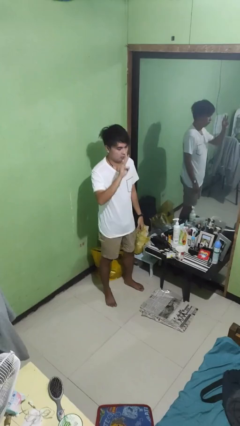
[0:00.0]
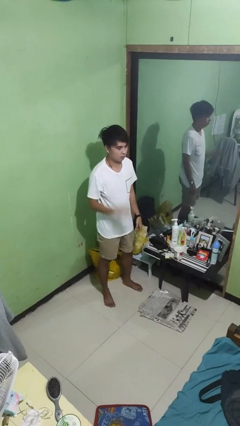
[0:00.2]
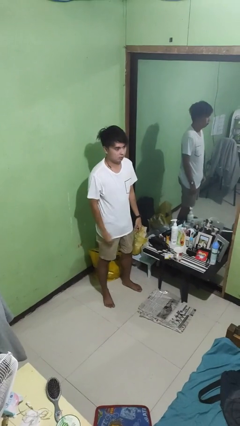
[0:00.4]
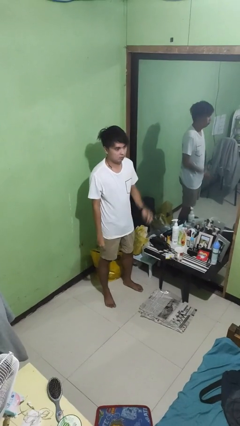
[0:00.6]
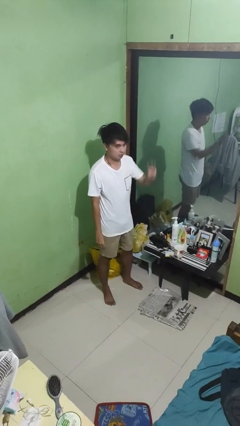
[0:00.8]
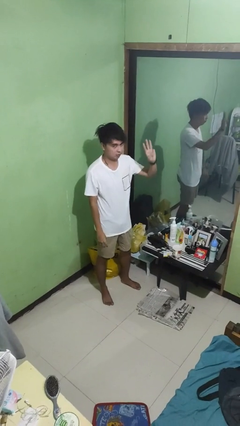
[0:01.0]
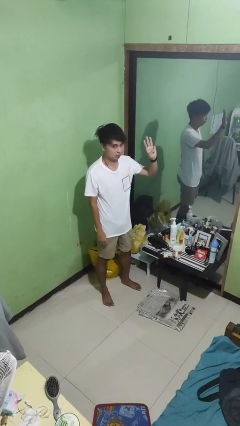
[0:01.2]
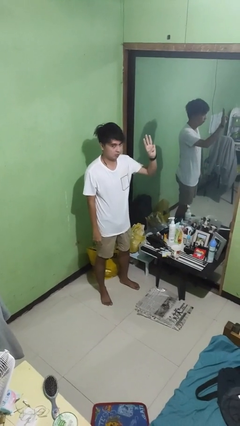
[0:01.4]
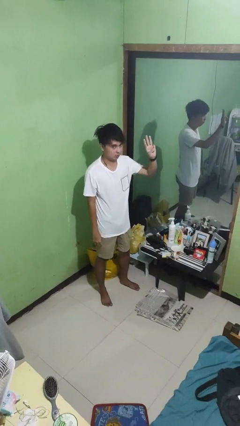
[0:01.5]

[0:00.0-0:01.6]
person gestures number three

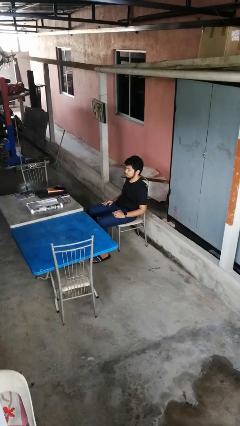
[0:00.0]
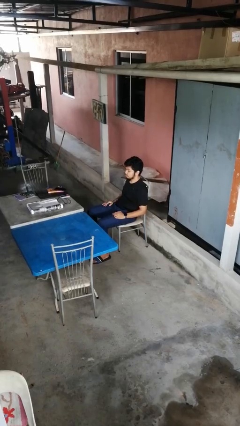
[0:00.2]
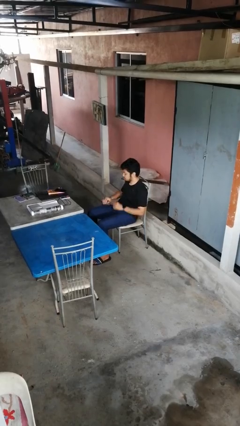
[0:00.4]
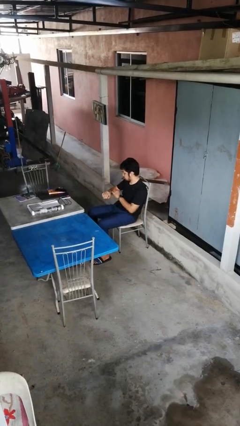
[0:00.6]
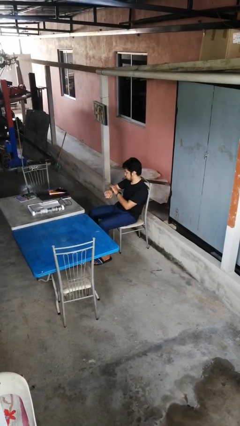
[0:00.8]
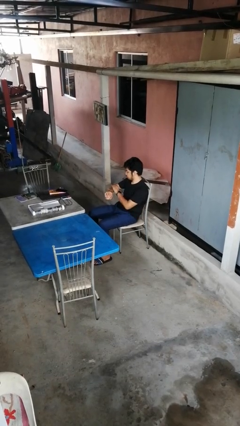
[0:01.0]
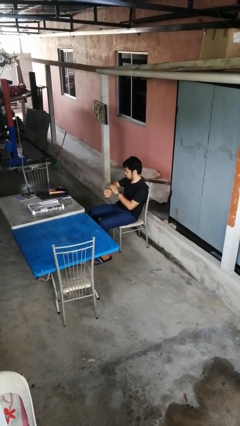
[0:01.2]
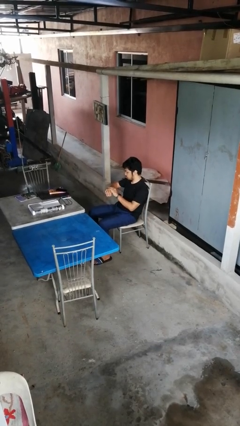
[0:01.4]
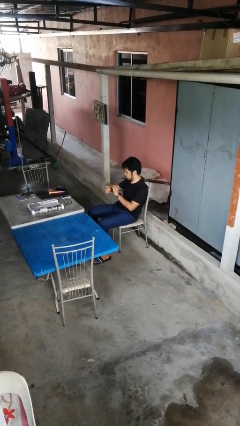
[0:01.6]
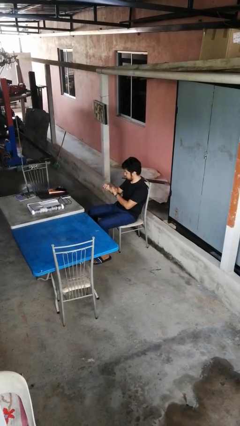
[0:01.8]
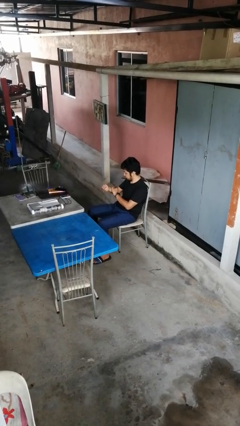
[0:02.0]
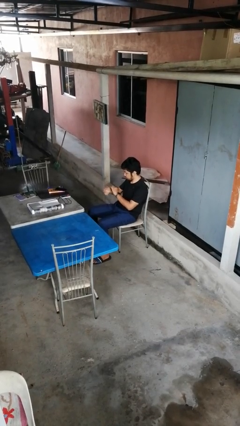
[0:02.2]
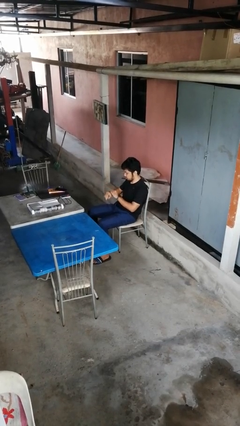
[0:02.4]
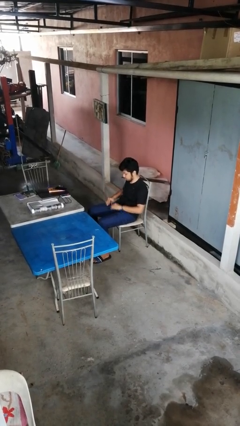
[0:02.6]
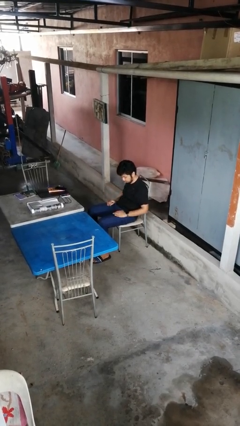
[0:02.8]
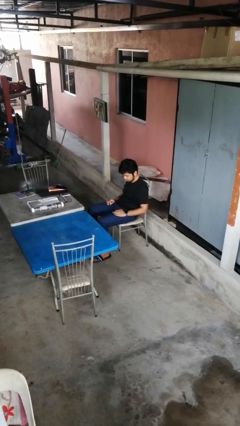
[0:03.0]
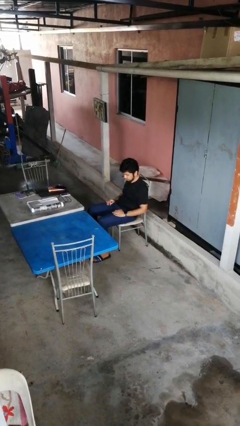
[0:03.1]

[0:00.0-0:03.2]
person looks at hands in lap

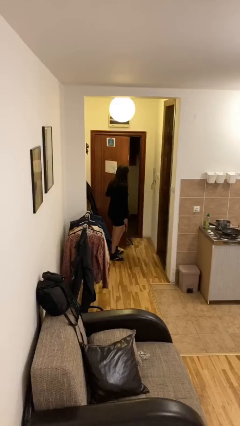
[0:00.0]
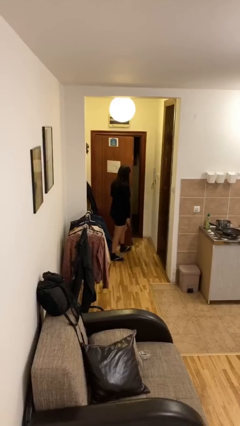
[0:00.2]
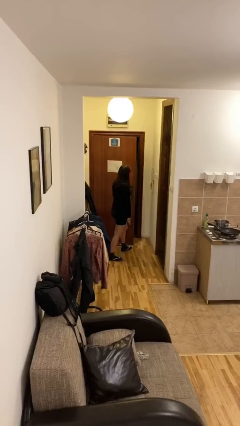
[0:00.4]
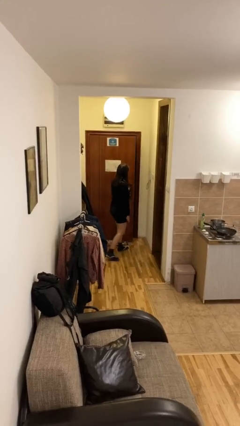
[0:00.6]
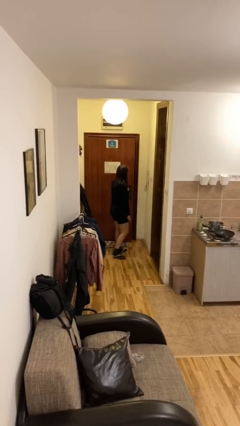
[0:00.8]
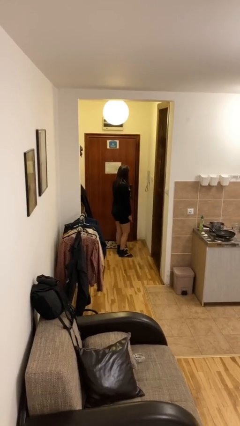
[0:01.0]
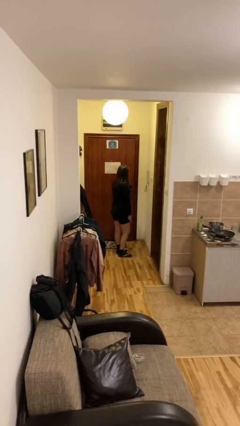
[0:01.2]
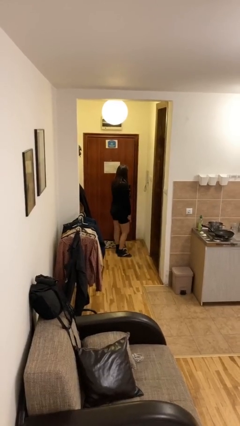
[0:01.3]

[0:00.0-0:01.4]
person closes facility door

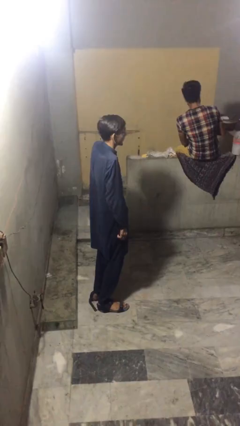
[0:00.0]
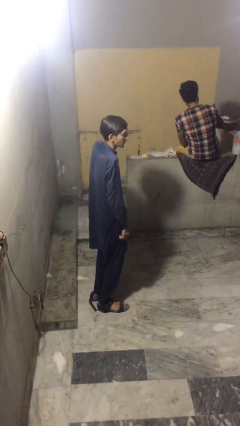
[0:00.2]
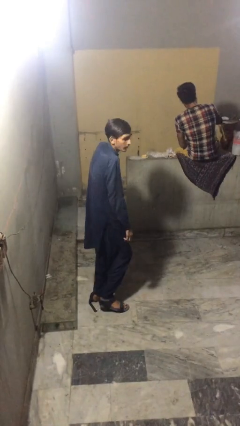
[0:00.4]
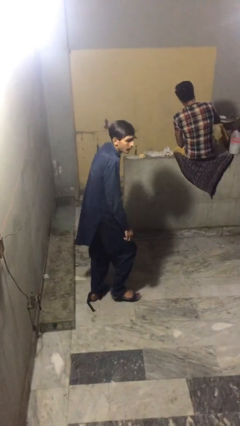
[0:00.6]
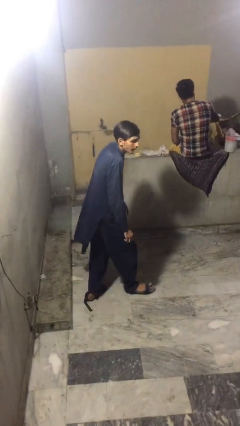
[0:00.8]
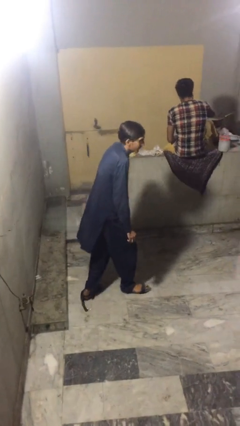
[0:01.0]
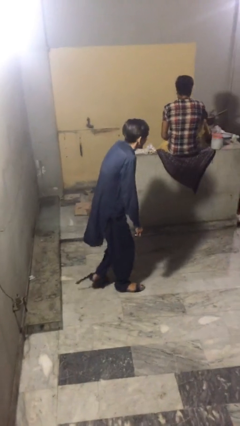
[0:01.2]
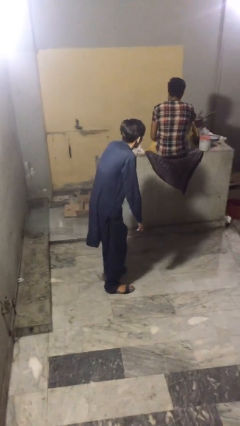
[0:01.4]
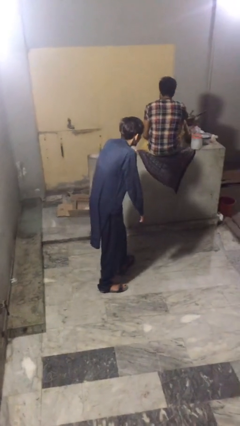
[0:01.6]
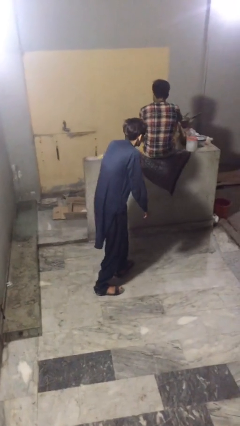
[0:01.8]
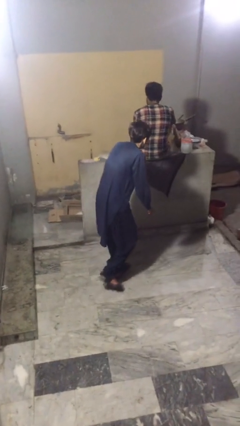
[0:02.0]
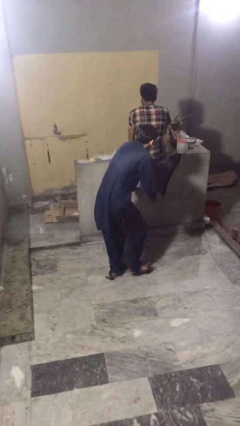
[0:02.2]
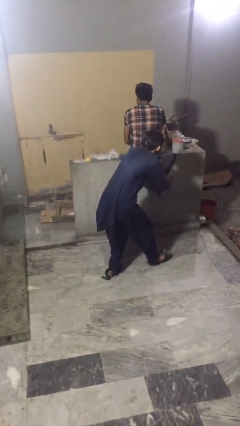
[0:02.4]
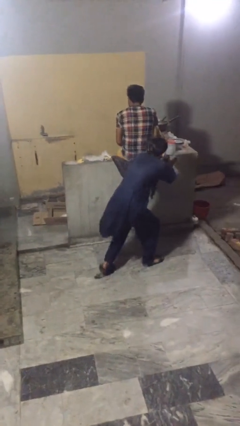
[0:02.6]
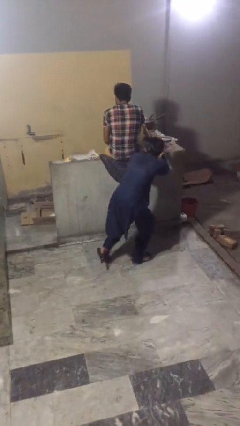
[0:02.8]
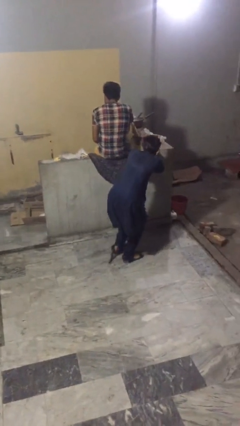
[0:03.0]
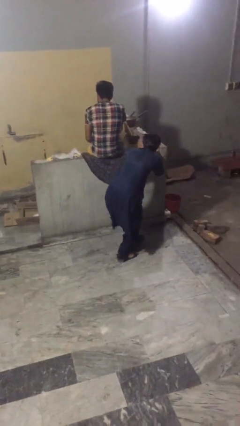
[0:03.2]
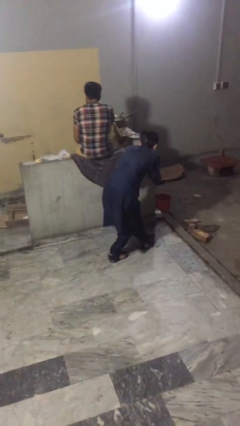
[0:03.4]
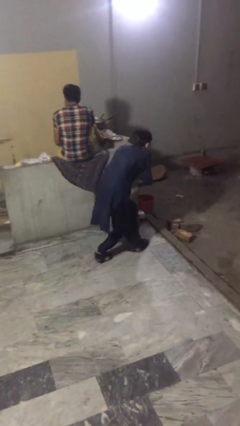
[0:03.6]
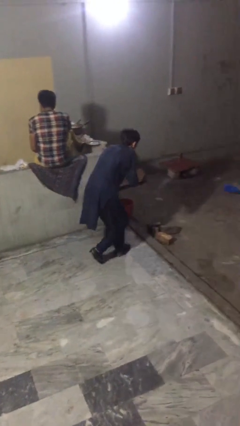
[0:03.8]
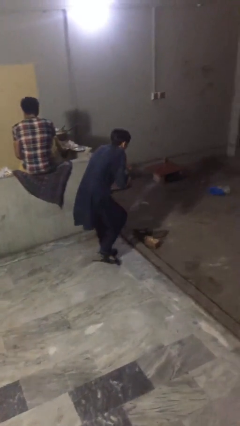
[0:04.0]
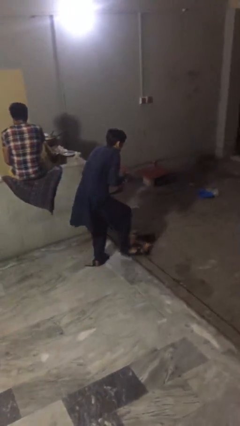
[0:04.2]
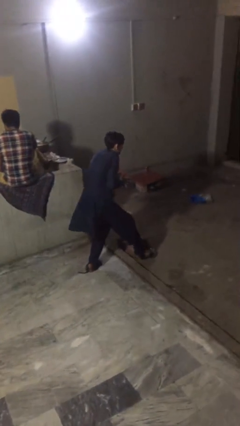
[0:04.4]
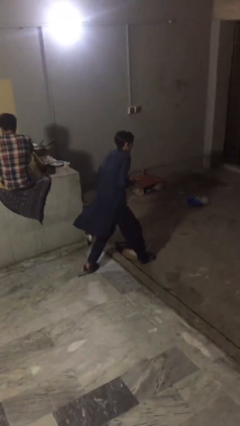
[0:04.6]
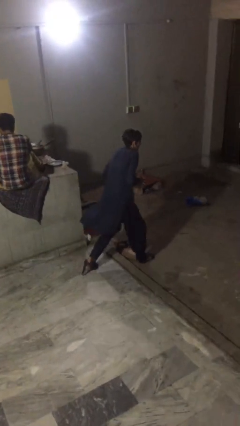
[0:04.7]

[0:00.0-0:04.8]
person steals object from person

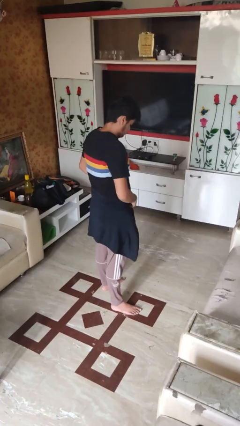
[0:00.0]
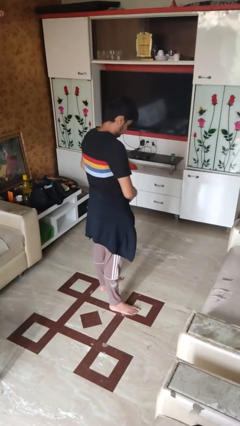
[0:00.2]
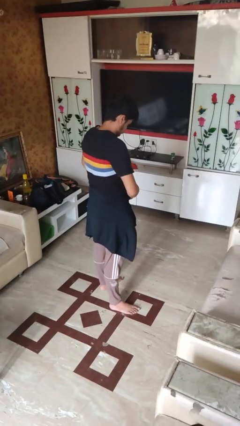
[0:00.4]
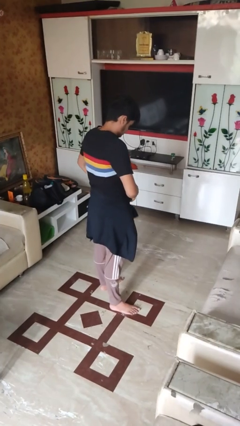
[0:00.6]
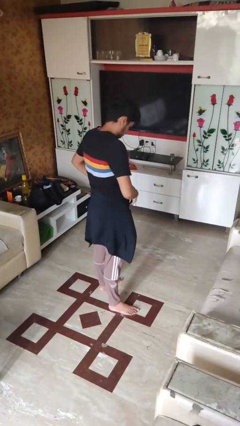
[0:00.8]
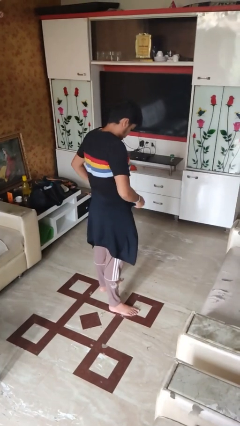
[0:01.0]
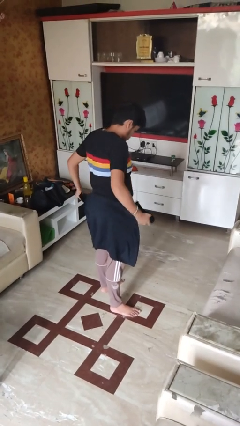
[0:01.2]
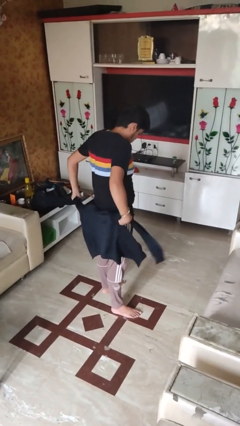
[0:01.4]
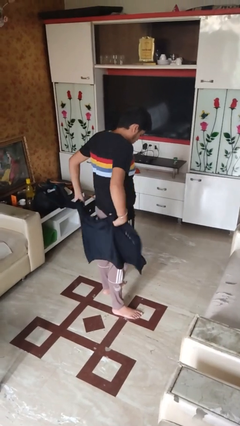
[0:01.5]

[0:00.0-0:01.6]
person unties jacket around waist

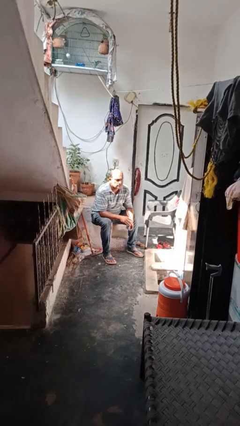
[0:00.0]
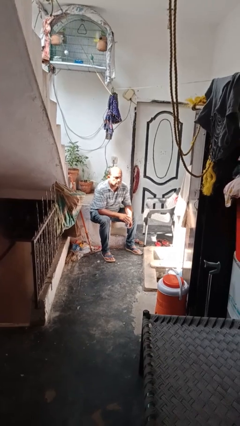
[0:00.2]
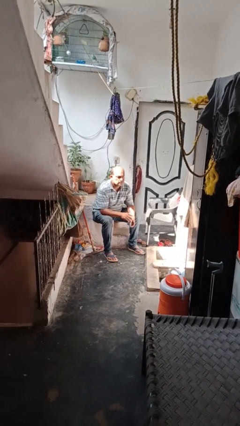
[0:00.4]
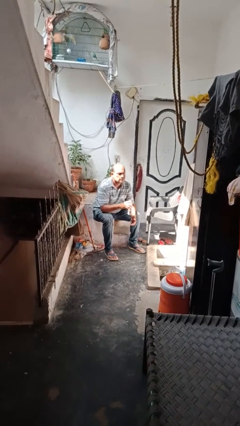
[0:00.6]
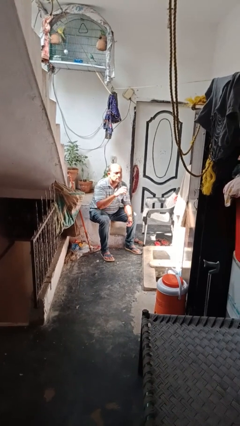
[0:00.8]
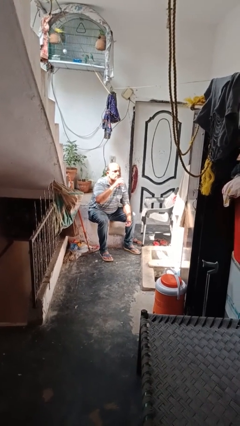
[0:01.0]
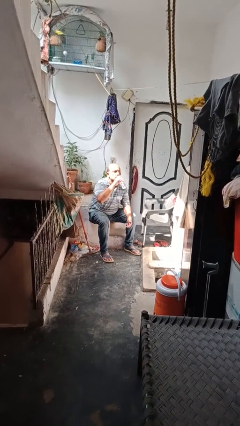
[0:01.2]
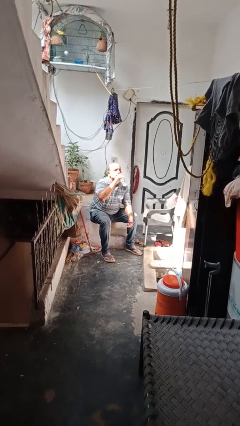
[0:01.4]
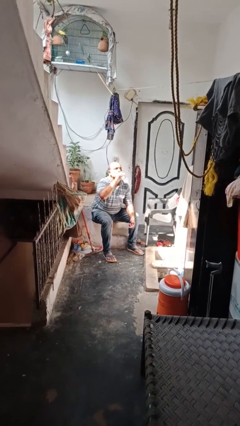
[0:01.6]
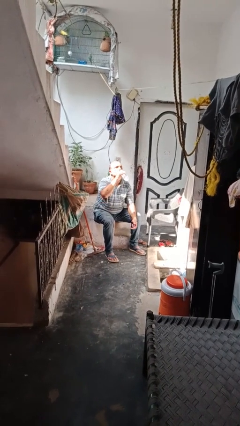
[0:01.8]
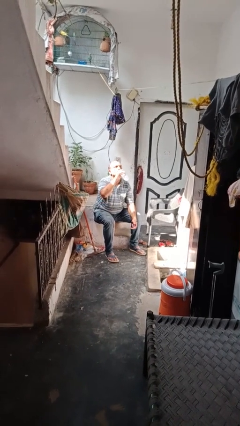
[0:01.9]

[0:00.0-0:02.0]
person drinks from bottle

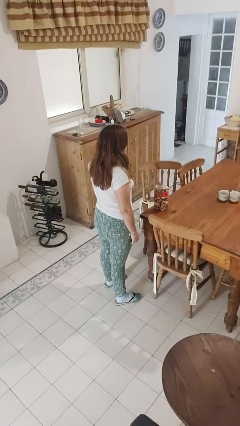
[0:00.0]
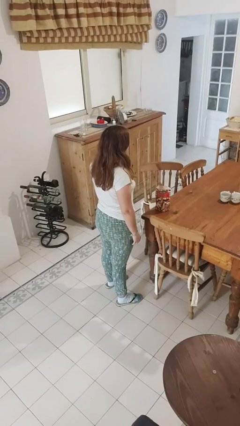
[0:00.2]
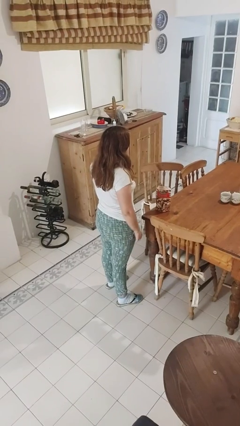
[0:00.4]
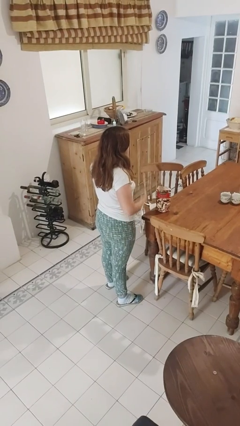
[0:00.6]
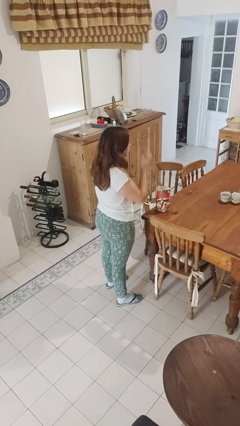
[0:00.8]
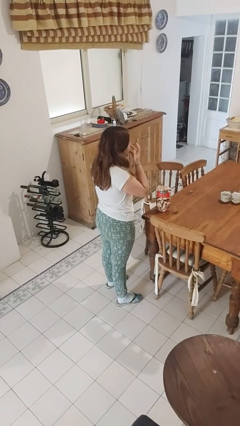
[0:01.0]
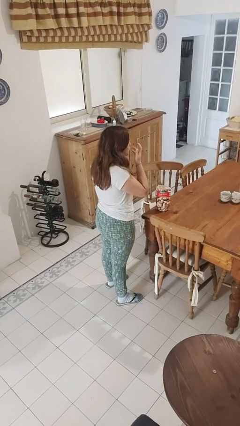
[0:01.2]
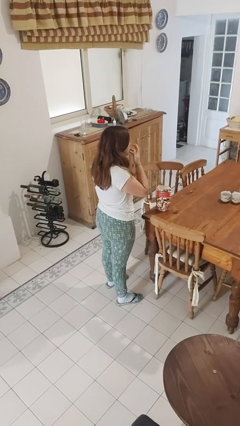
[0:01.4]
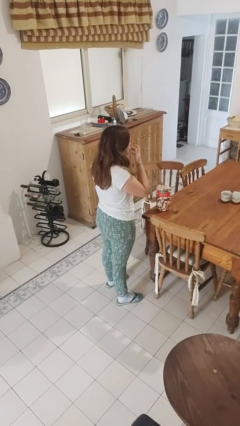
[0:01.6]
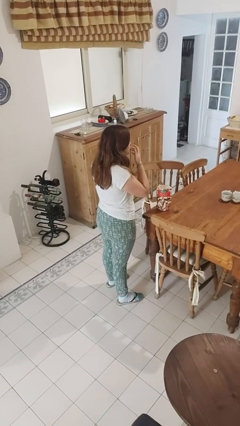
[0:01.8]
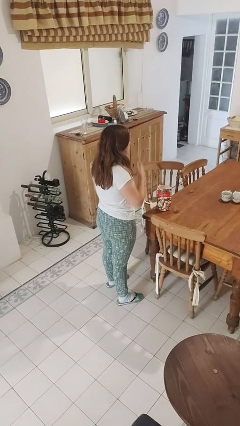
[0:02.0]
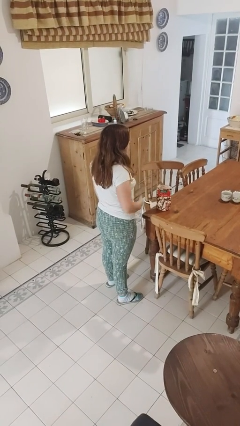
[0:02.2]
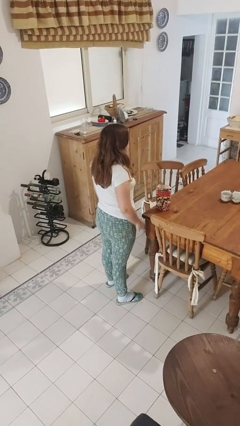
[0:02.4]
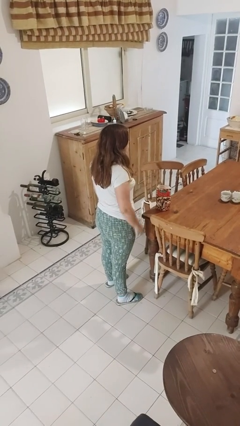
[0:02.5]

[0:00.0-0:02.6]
person licks fingers
